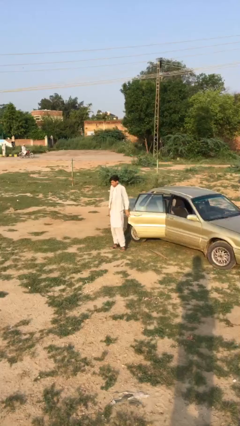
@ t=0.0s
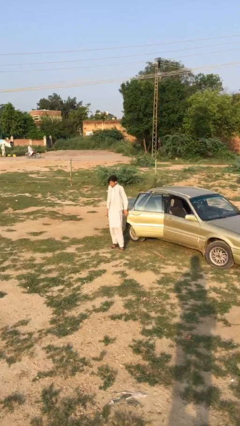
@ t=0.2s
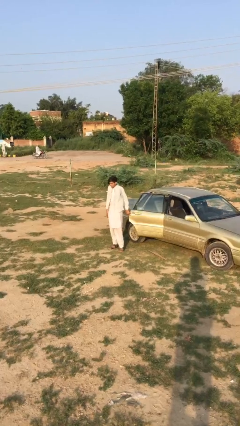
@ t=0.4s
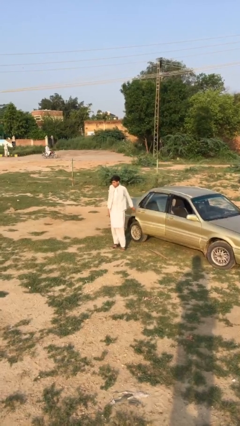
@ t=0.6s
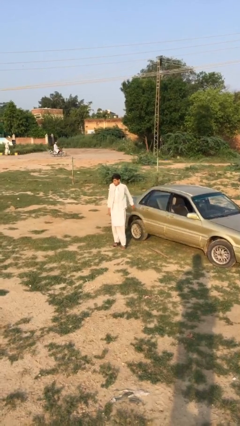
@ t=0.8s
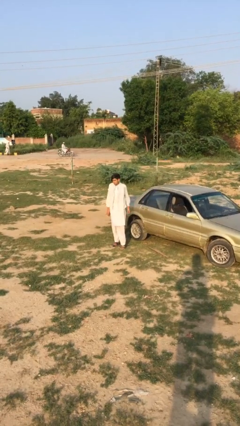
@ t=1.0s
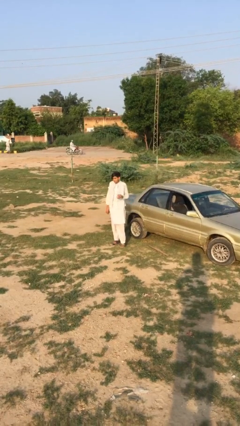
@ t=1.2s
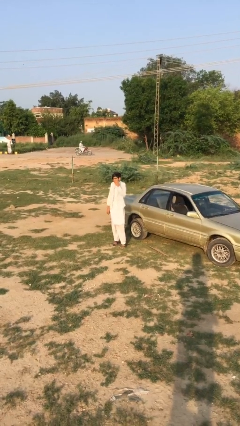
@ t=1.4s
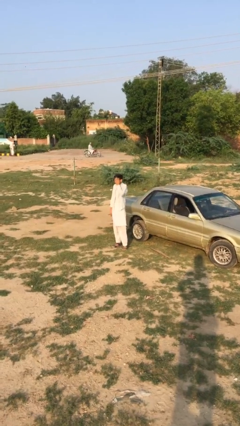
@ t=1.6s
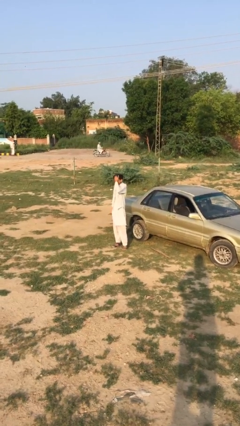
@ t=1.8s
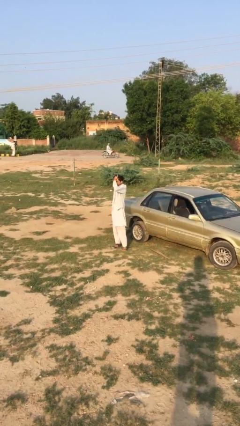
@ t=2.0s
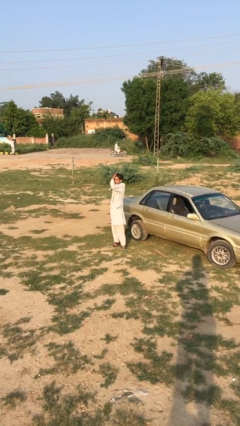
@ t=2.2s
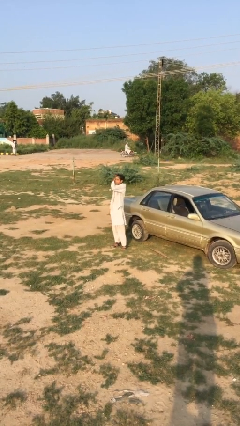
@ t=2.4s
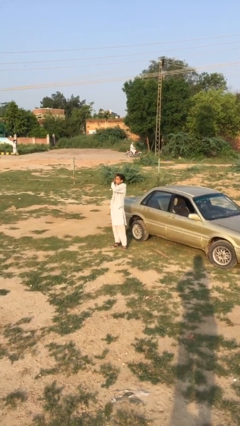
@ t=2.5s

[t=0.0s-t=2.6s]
person closes car door

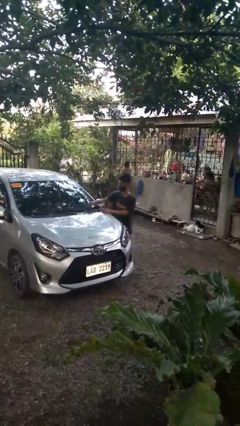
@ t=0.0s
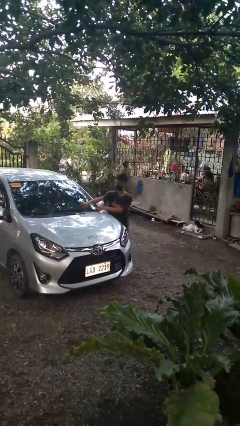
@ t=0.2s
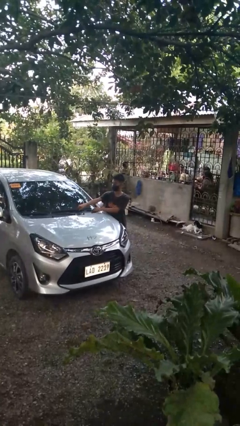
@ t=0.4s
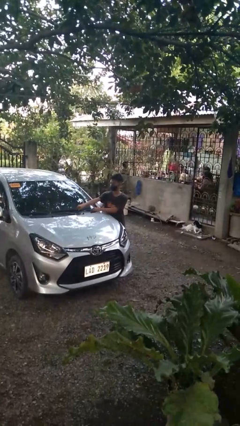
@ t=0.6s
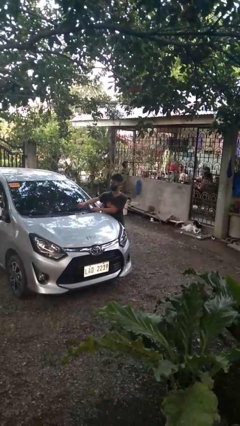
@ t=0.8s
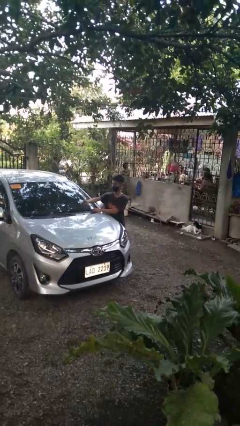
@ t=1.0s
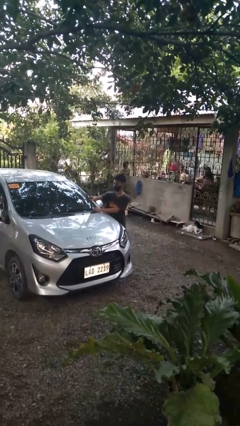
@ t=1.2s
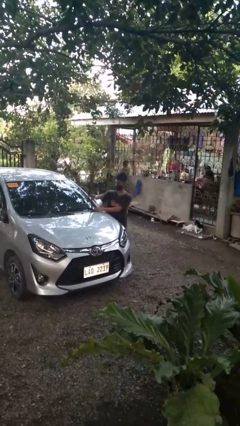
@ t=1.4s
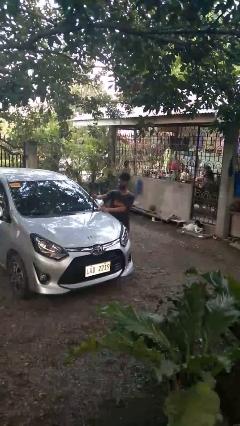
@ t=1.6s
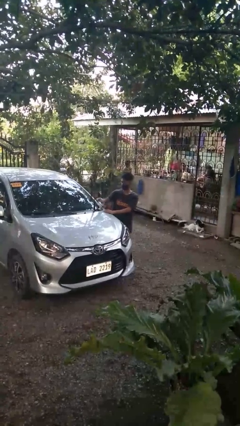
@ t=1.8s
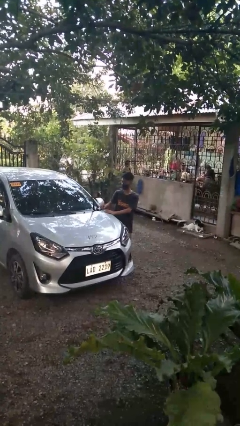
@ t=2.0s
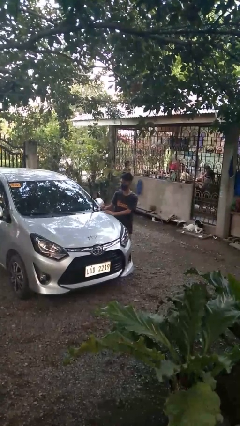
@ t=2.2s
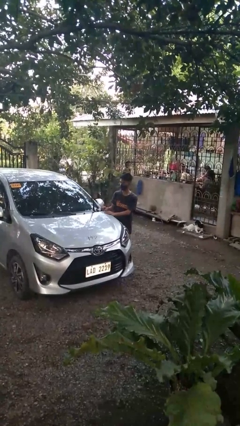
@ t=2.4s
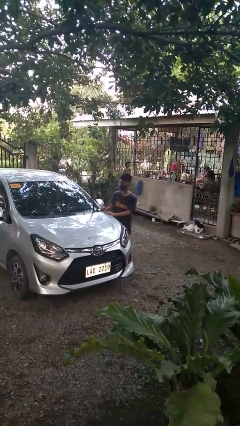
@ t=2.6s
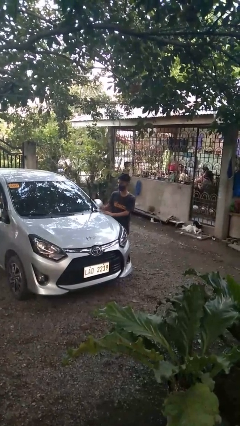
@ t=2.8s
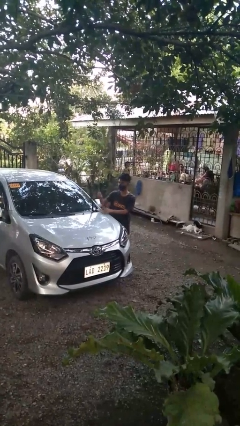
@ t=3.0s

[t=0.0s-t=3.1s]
person flips up car wipers

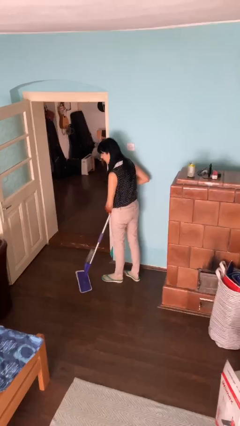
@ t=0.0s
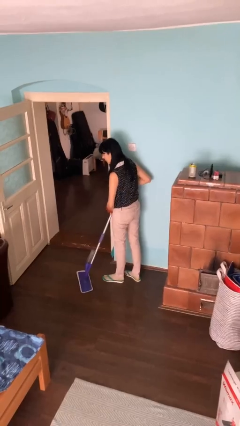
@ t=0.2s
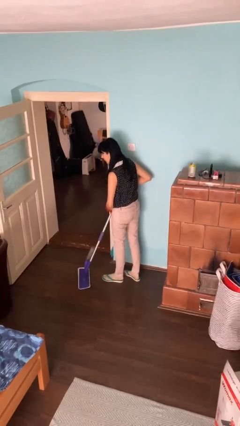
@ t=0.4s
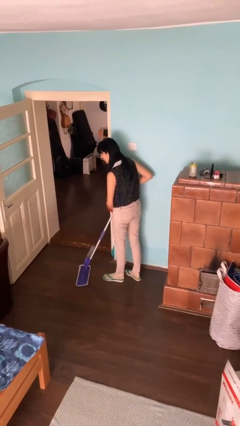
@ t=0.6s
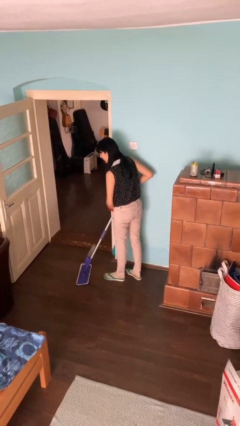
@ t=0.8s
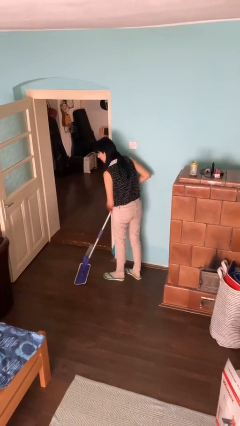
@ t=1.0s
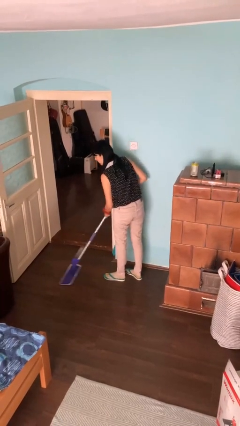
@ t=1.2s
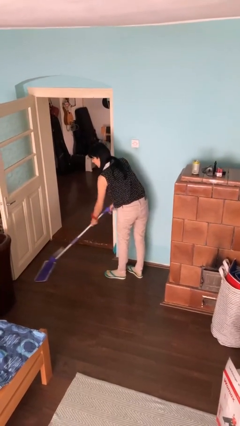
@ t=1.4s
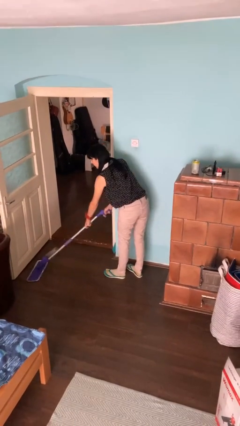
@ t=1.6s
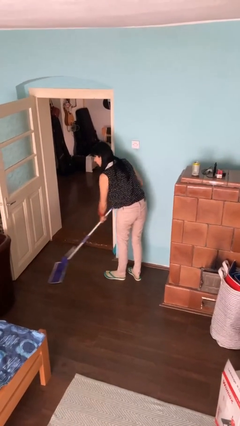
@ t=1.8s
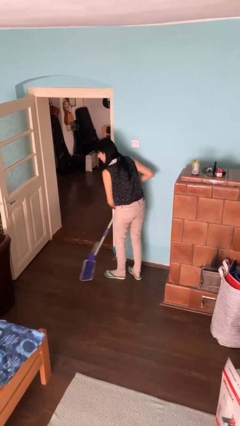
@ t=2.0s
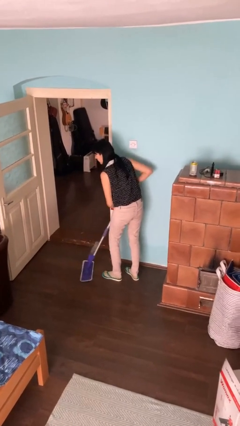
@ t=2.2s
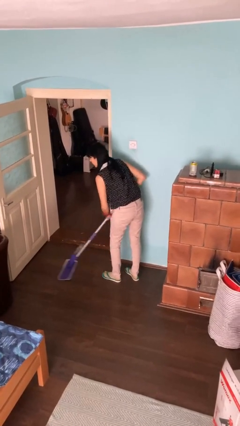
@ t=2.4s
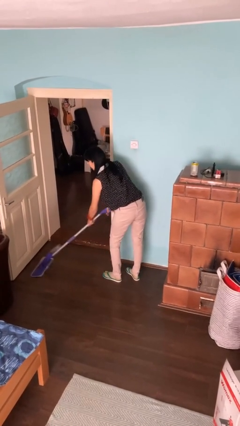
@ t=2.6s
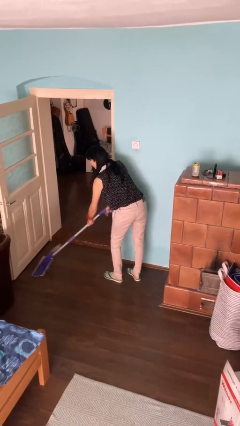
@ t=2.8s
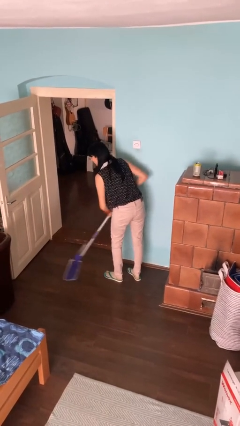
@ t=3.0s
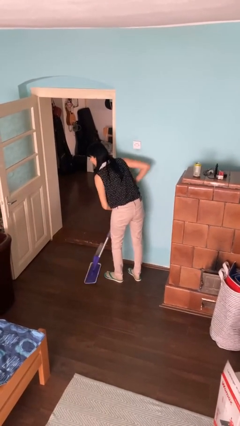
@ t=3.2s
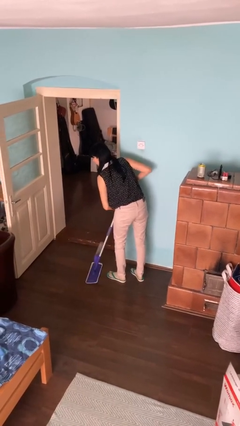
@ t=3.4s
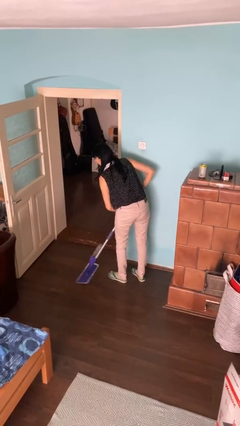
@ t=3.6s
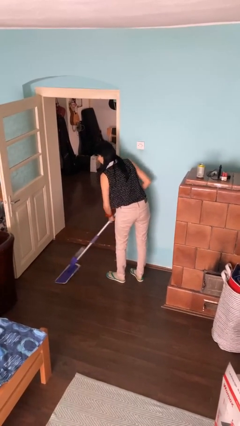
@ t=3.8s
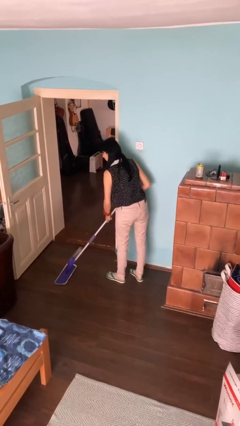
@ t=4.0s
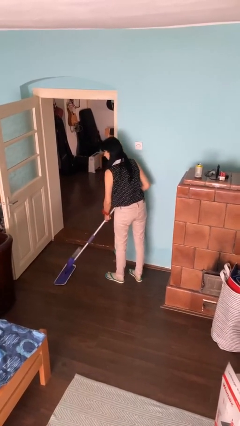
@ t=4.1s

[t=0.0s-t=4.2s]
person mops

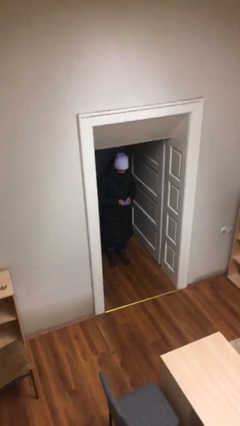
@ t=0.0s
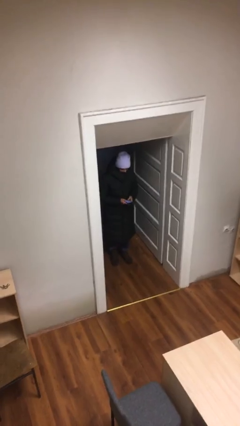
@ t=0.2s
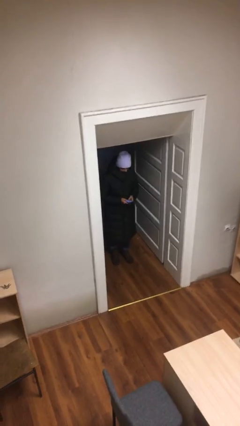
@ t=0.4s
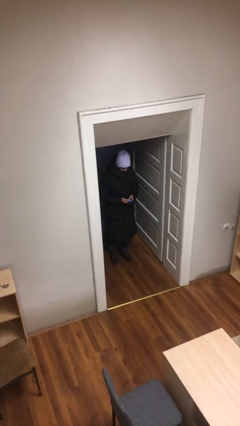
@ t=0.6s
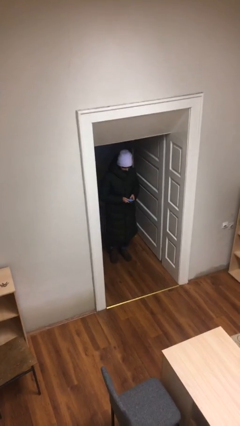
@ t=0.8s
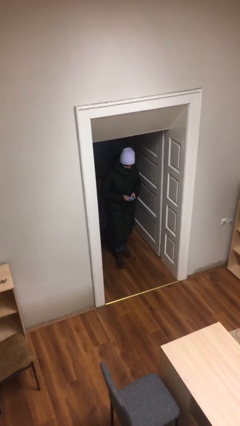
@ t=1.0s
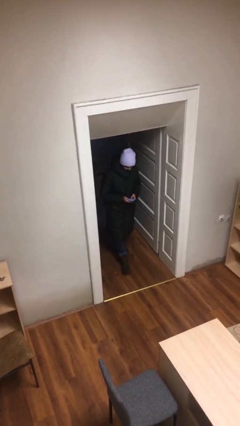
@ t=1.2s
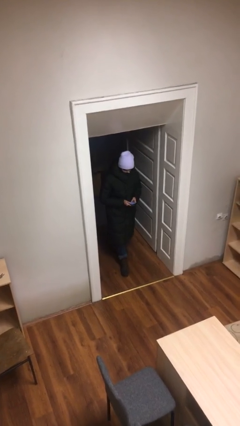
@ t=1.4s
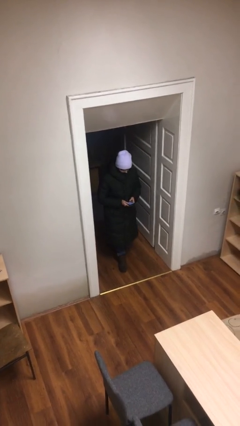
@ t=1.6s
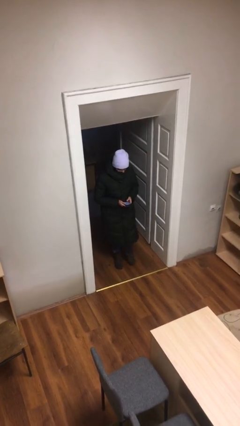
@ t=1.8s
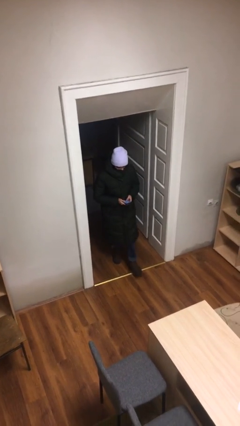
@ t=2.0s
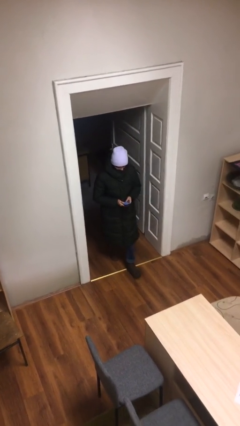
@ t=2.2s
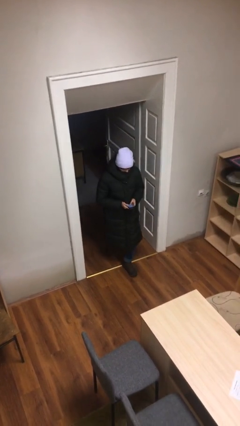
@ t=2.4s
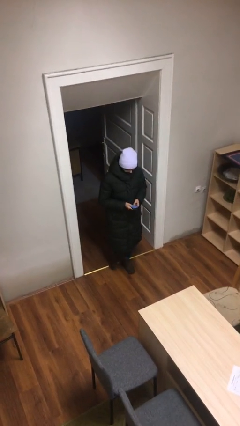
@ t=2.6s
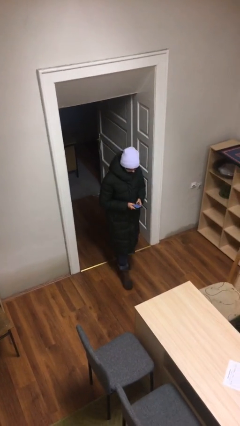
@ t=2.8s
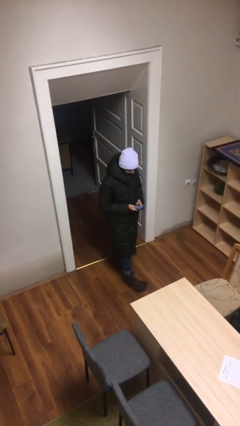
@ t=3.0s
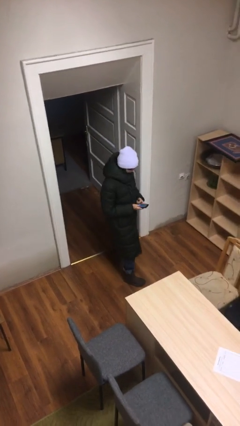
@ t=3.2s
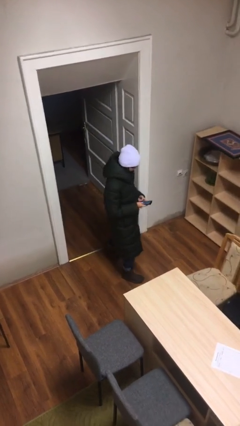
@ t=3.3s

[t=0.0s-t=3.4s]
person enters scene through structure

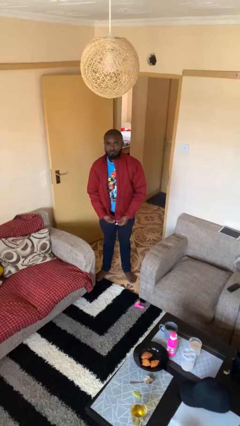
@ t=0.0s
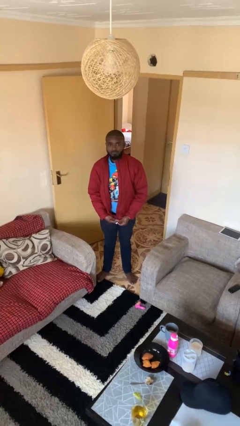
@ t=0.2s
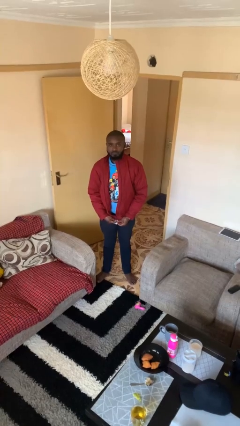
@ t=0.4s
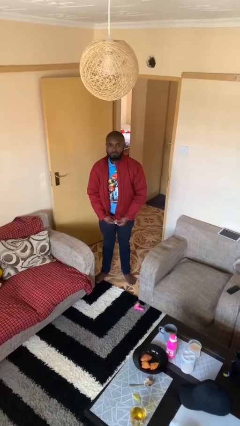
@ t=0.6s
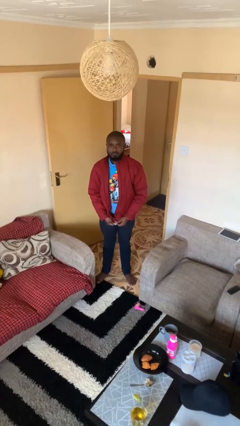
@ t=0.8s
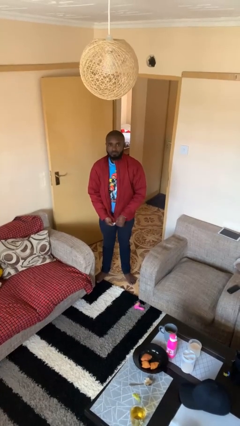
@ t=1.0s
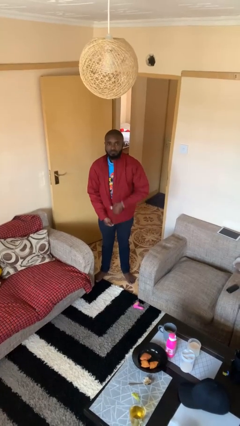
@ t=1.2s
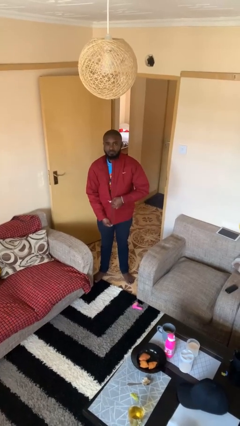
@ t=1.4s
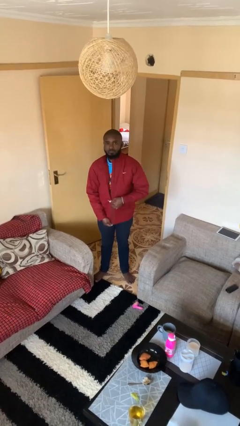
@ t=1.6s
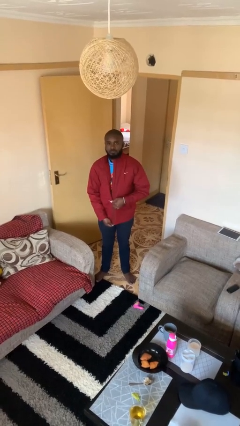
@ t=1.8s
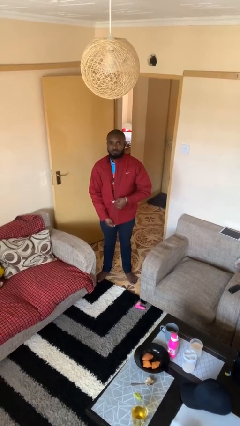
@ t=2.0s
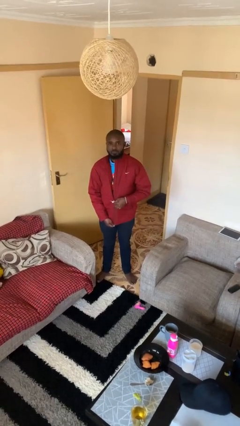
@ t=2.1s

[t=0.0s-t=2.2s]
person zips up jacket

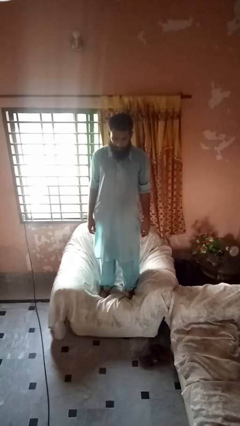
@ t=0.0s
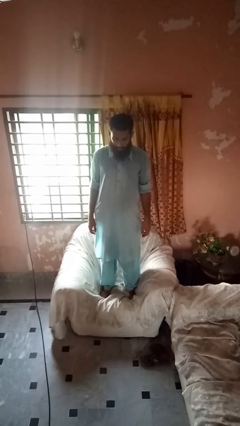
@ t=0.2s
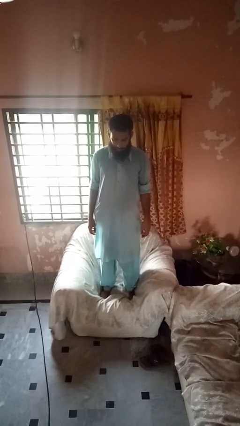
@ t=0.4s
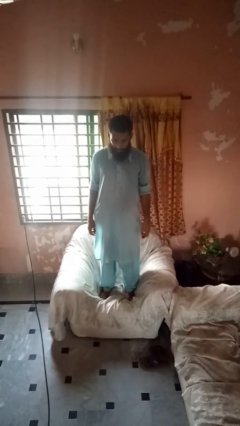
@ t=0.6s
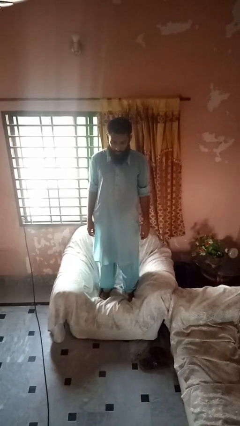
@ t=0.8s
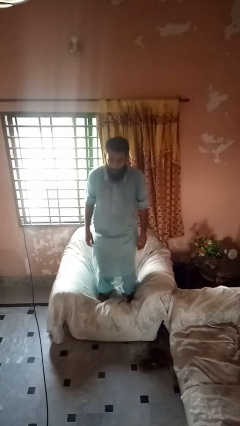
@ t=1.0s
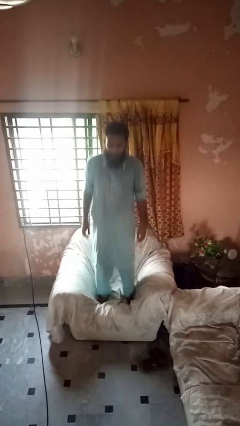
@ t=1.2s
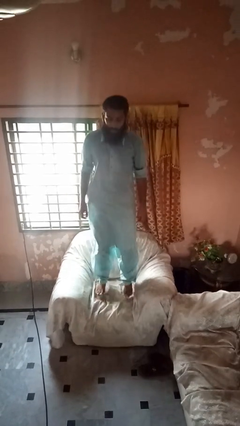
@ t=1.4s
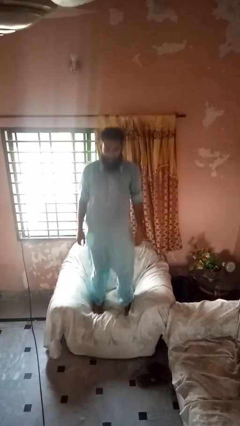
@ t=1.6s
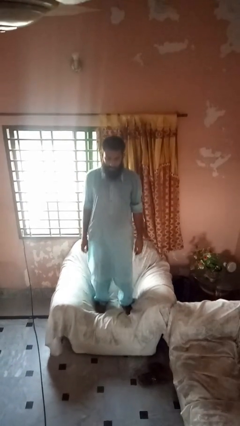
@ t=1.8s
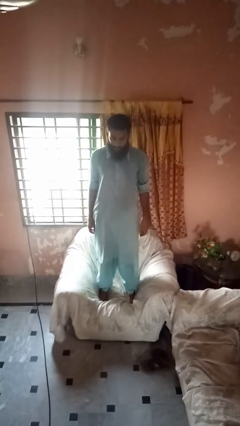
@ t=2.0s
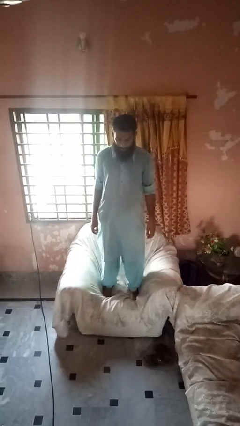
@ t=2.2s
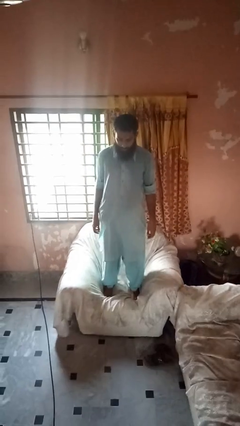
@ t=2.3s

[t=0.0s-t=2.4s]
person jumps on couch
